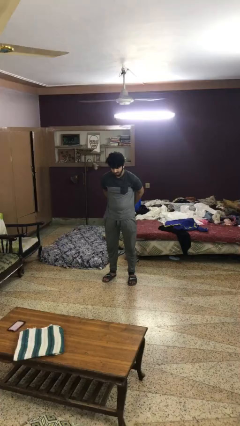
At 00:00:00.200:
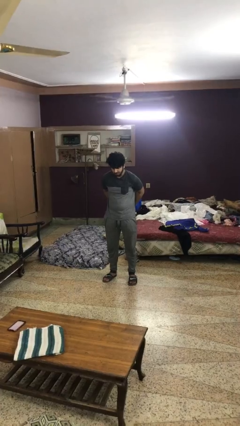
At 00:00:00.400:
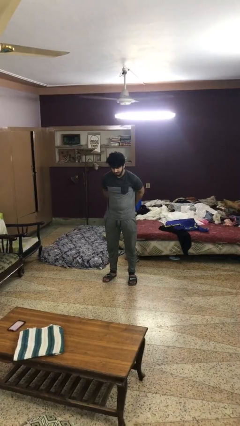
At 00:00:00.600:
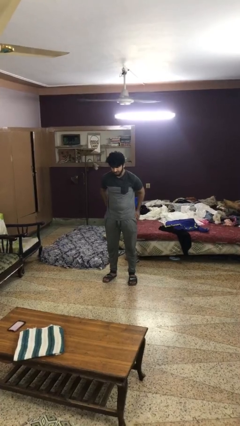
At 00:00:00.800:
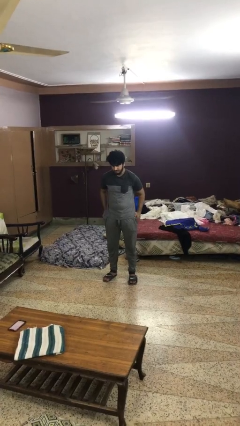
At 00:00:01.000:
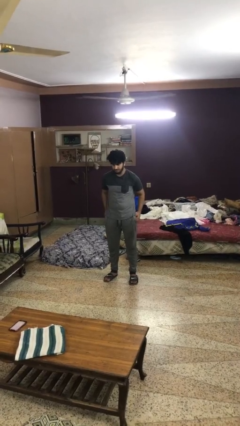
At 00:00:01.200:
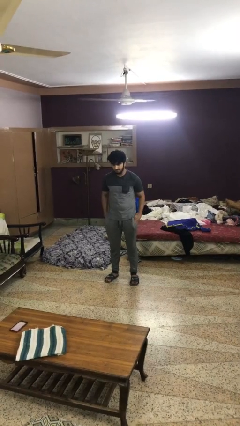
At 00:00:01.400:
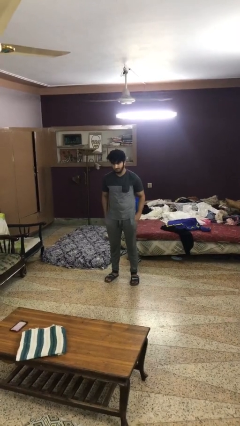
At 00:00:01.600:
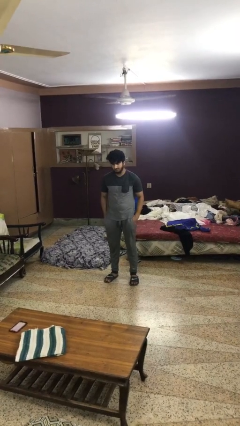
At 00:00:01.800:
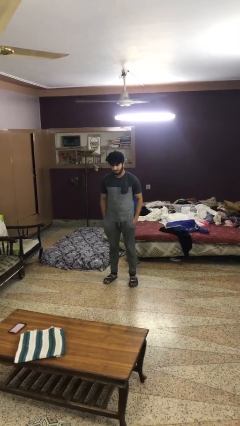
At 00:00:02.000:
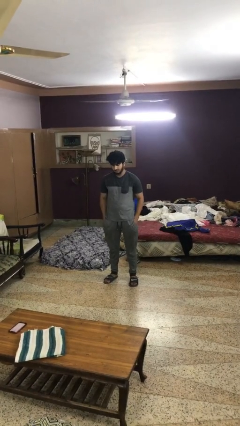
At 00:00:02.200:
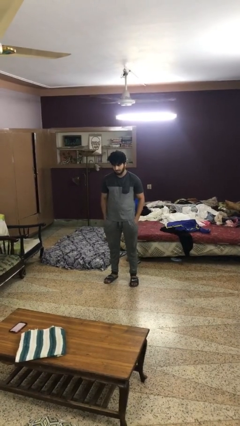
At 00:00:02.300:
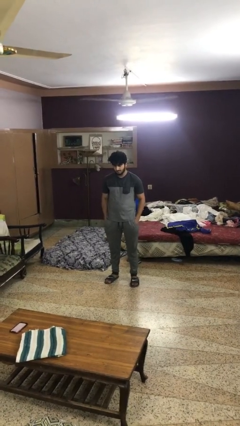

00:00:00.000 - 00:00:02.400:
person puts hands in back pockets

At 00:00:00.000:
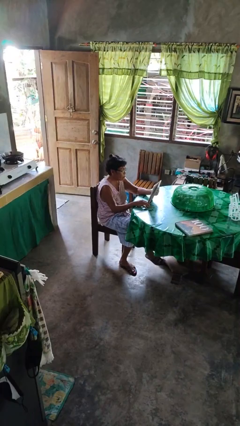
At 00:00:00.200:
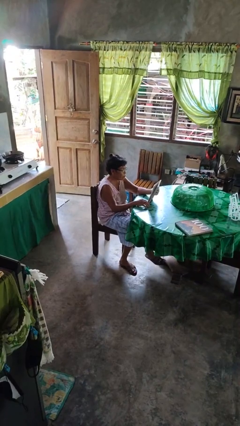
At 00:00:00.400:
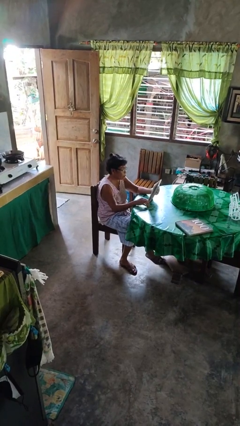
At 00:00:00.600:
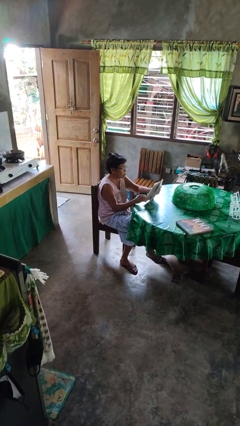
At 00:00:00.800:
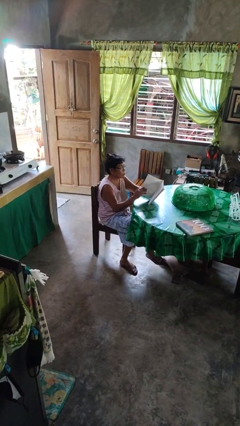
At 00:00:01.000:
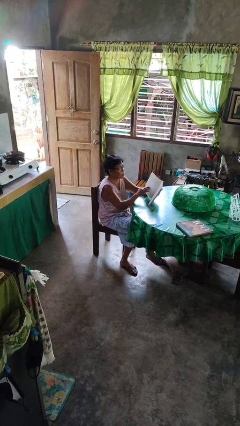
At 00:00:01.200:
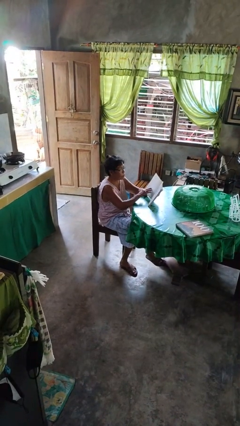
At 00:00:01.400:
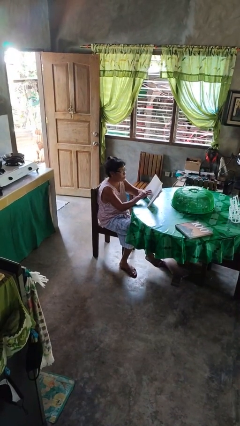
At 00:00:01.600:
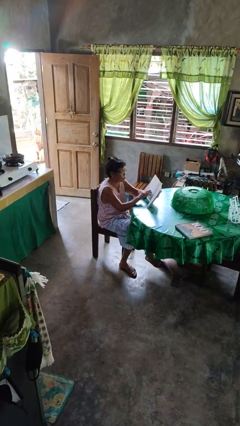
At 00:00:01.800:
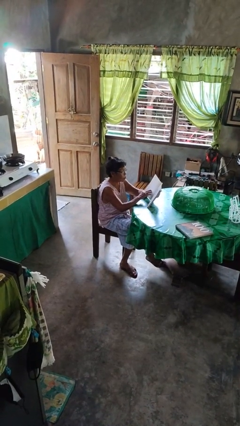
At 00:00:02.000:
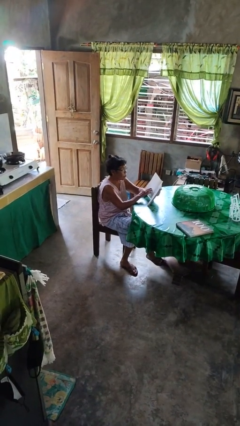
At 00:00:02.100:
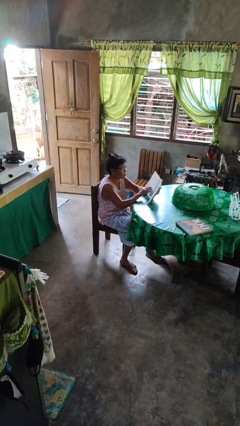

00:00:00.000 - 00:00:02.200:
person reads magazine

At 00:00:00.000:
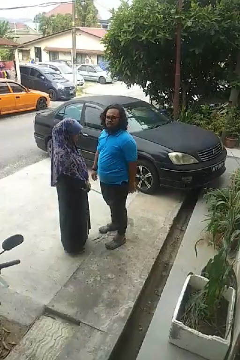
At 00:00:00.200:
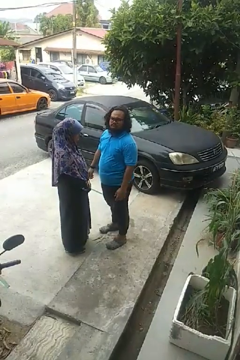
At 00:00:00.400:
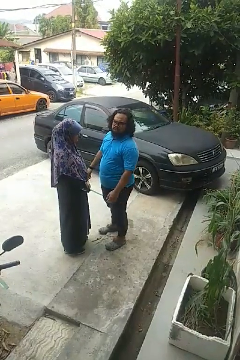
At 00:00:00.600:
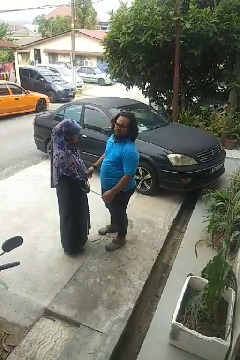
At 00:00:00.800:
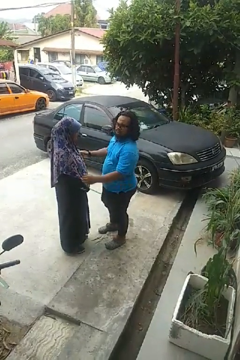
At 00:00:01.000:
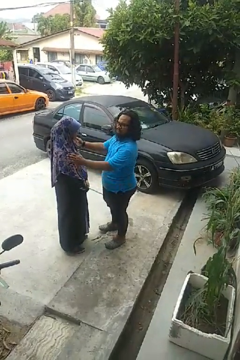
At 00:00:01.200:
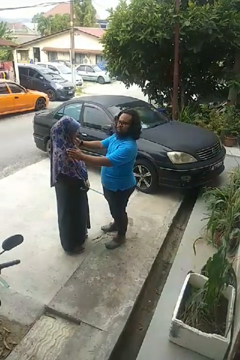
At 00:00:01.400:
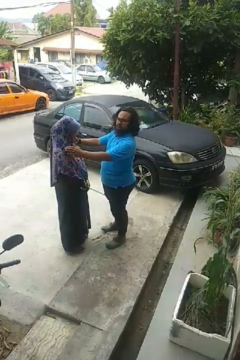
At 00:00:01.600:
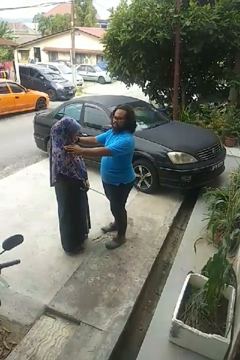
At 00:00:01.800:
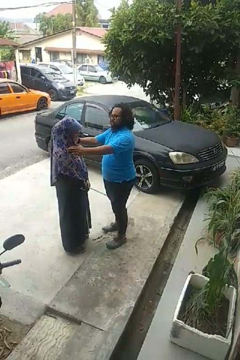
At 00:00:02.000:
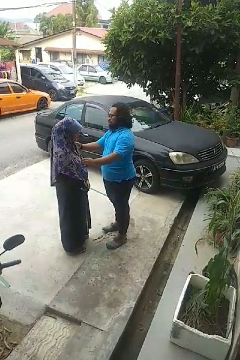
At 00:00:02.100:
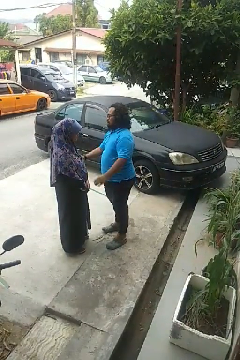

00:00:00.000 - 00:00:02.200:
person pounds shoulders of person

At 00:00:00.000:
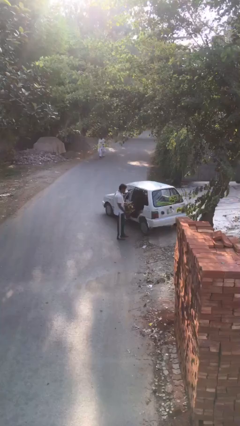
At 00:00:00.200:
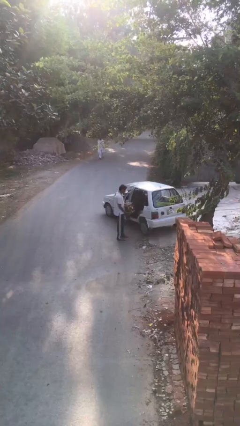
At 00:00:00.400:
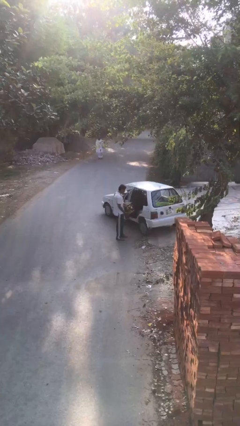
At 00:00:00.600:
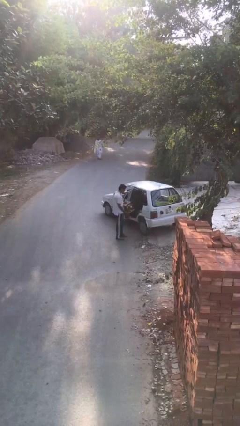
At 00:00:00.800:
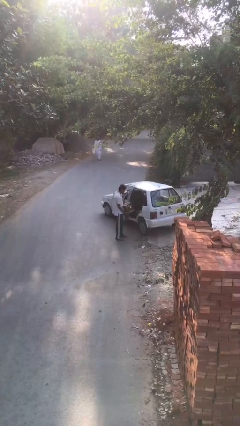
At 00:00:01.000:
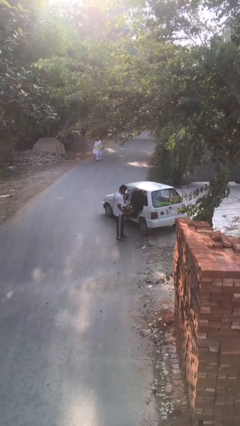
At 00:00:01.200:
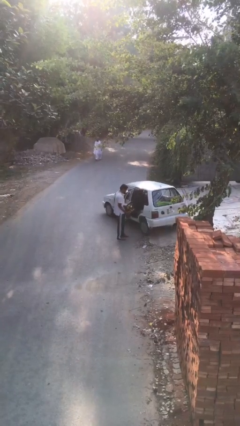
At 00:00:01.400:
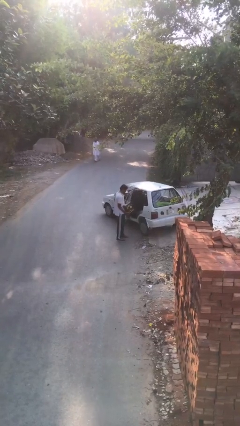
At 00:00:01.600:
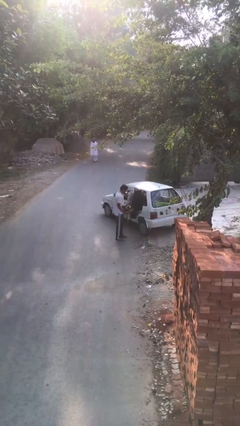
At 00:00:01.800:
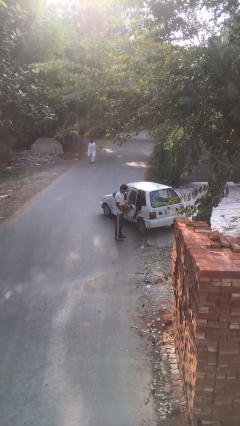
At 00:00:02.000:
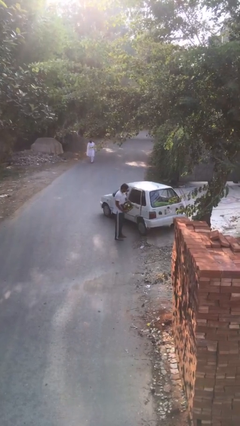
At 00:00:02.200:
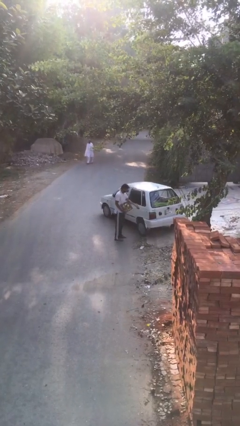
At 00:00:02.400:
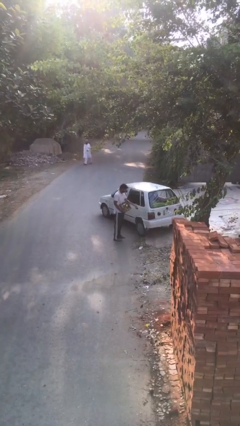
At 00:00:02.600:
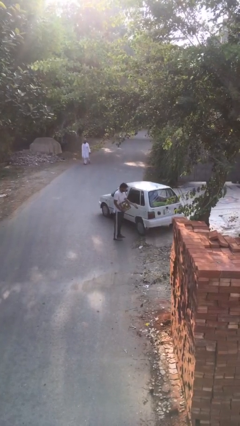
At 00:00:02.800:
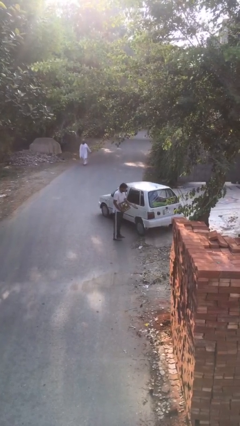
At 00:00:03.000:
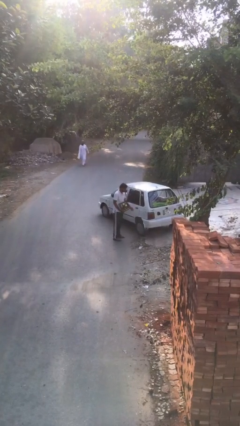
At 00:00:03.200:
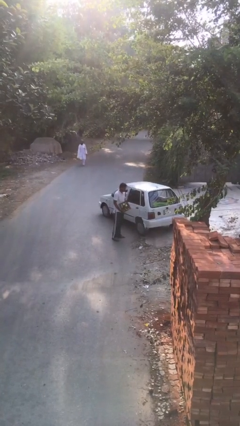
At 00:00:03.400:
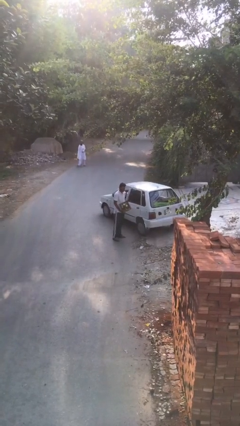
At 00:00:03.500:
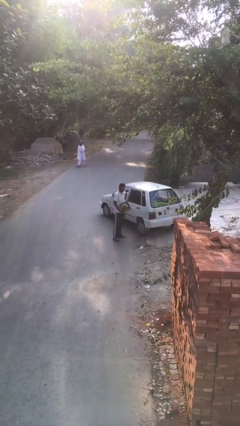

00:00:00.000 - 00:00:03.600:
person closes car door

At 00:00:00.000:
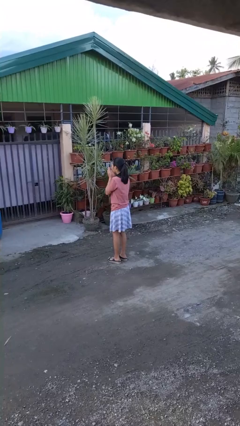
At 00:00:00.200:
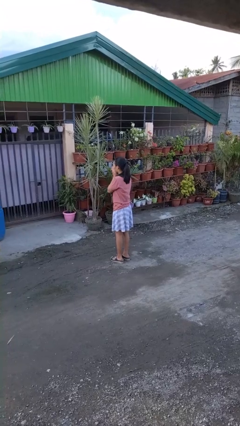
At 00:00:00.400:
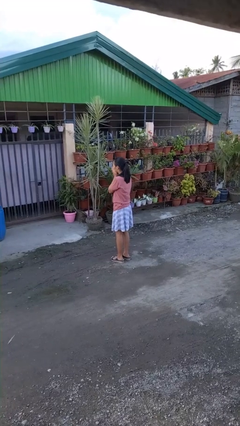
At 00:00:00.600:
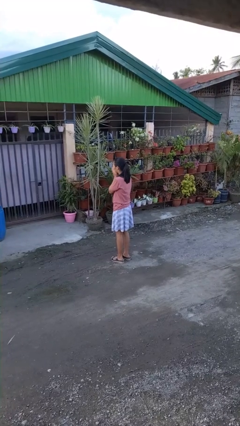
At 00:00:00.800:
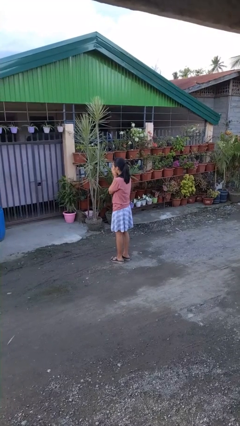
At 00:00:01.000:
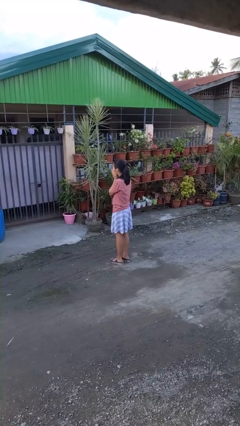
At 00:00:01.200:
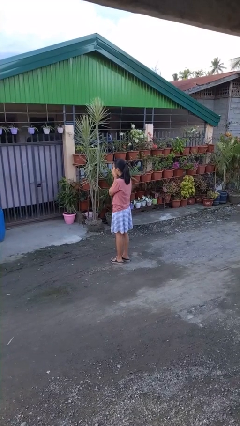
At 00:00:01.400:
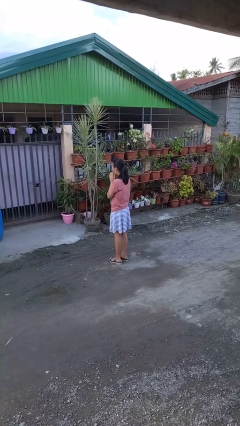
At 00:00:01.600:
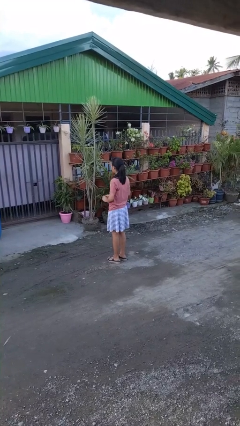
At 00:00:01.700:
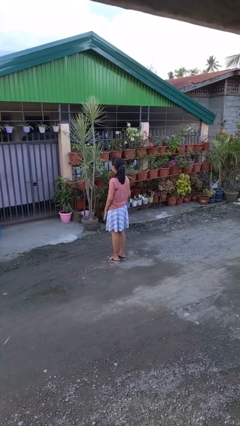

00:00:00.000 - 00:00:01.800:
person blows into hands

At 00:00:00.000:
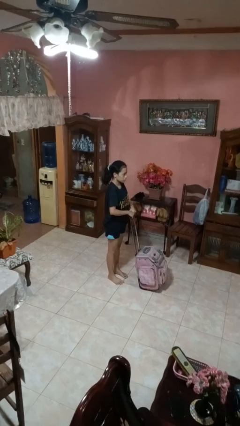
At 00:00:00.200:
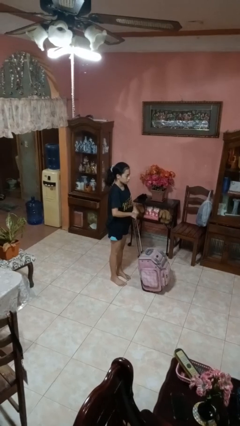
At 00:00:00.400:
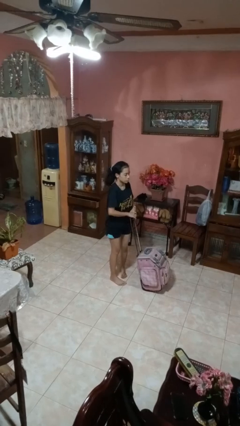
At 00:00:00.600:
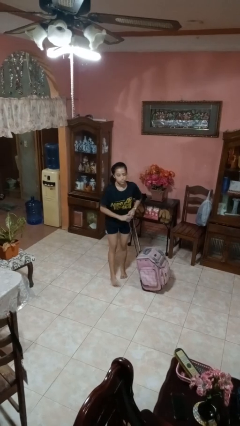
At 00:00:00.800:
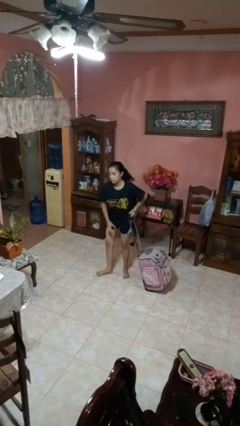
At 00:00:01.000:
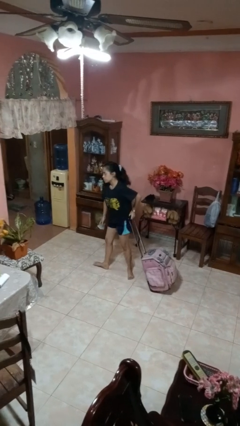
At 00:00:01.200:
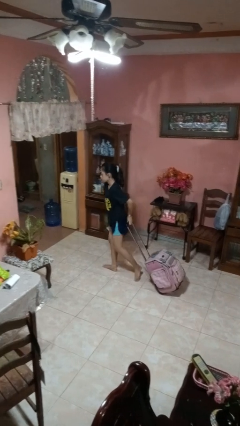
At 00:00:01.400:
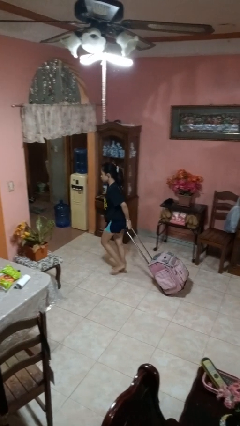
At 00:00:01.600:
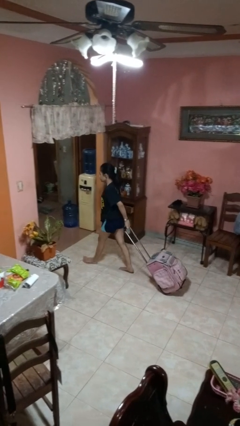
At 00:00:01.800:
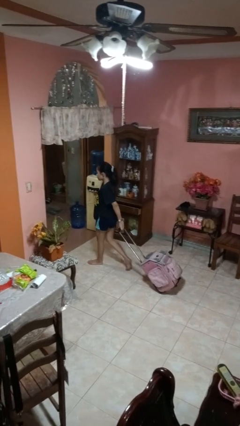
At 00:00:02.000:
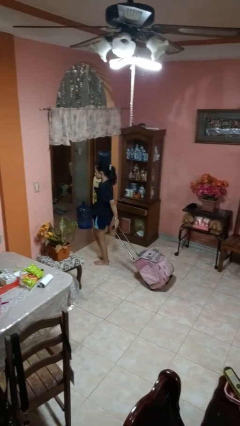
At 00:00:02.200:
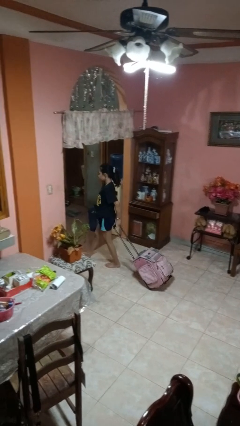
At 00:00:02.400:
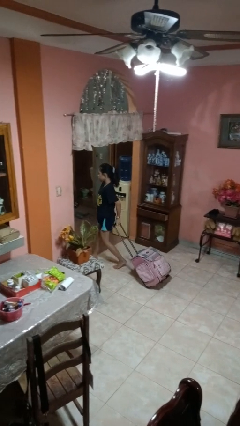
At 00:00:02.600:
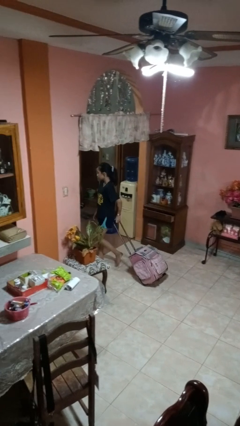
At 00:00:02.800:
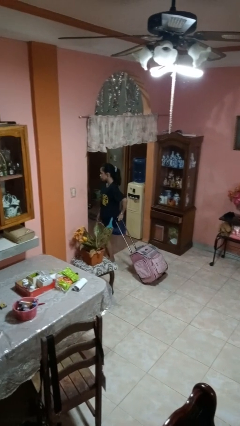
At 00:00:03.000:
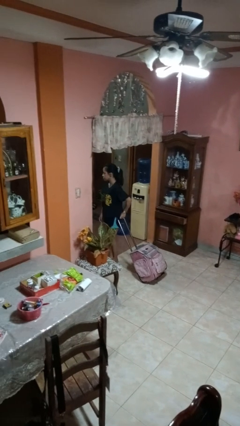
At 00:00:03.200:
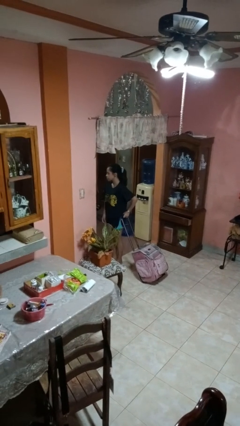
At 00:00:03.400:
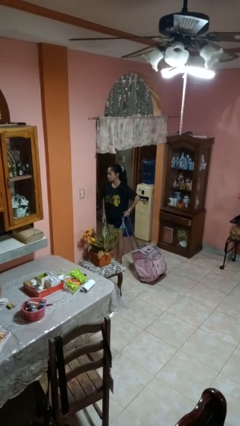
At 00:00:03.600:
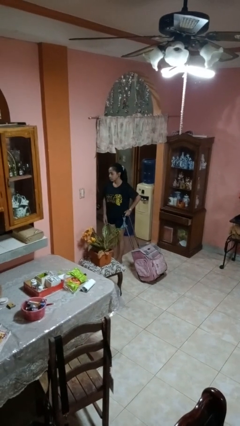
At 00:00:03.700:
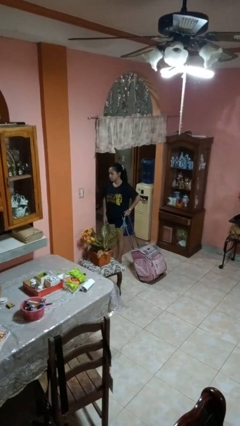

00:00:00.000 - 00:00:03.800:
person pulls wheeled cart

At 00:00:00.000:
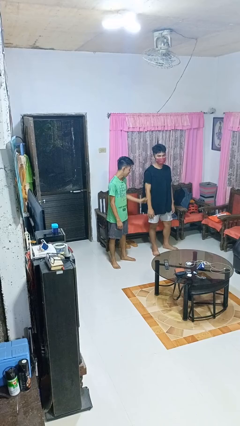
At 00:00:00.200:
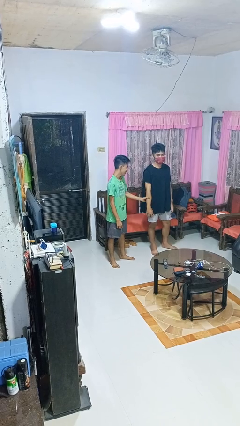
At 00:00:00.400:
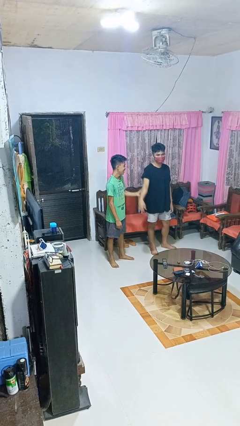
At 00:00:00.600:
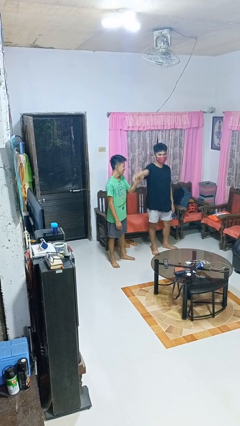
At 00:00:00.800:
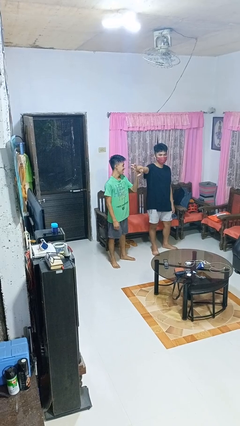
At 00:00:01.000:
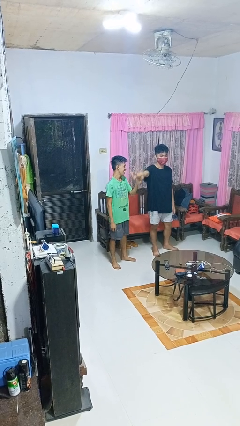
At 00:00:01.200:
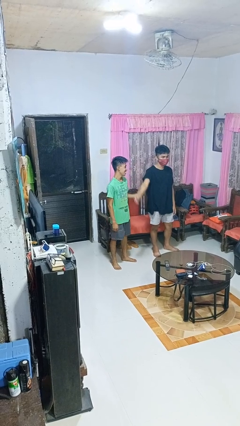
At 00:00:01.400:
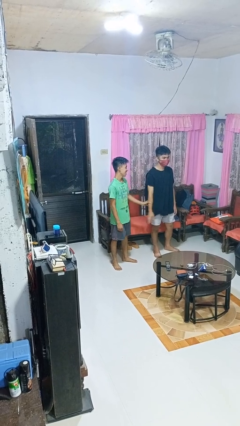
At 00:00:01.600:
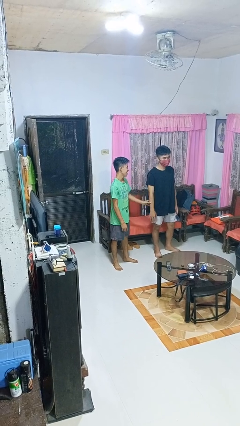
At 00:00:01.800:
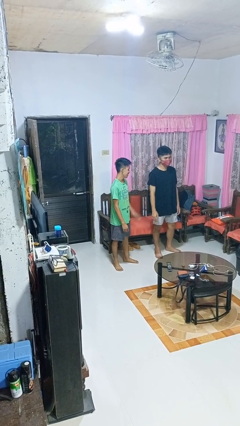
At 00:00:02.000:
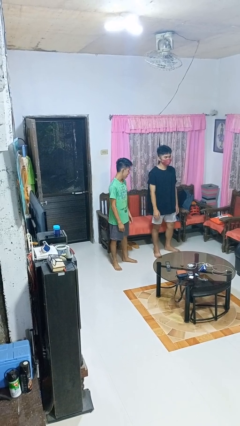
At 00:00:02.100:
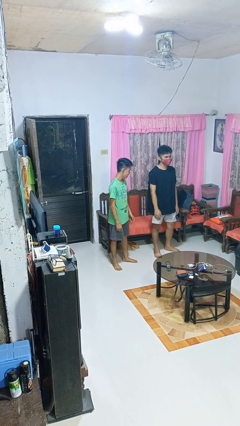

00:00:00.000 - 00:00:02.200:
person grabs person by forearm
